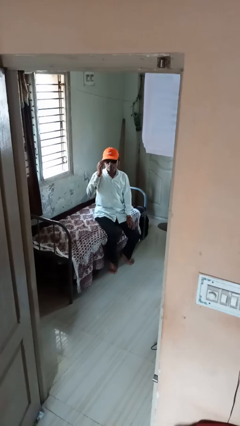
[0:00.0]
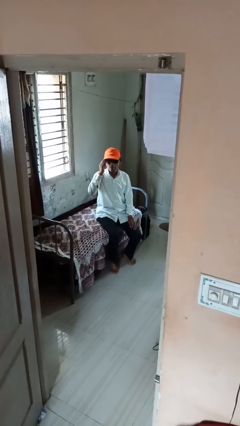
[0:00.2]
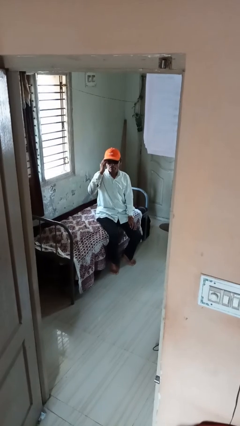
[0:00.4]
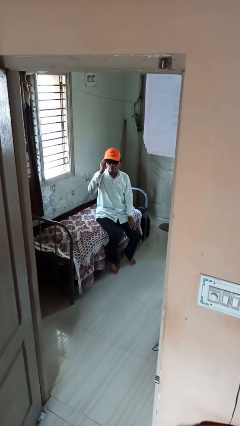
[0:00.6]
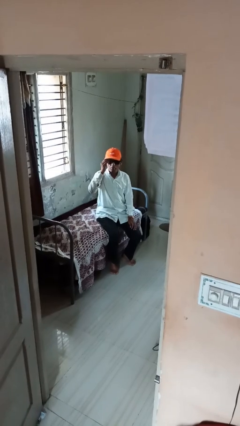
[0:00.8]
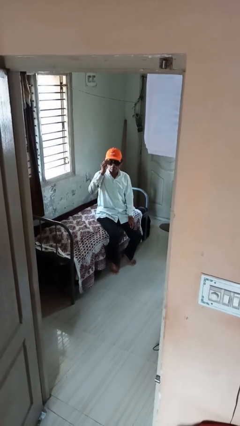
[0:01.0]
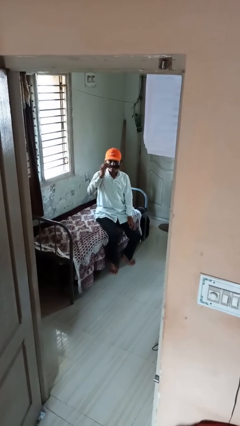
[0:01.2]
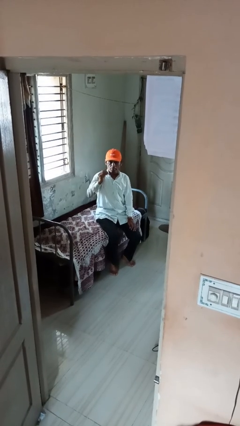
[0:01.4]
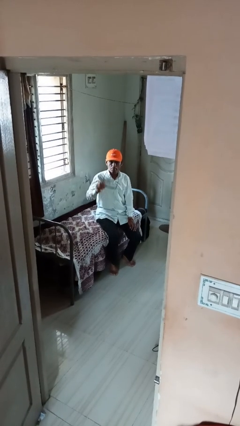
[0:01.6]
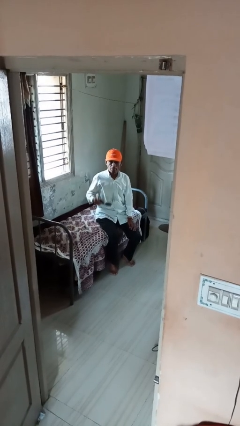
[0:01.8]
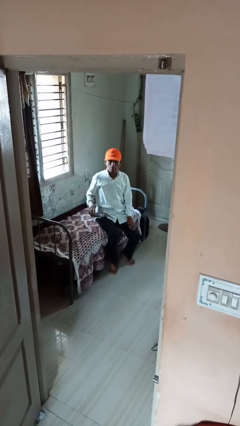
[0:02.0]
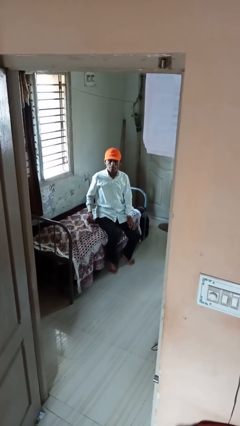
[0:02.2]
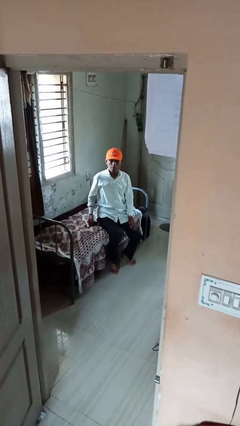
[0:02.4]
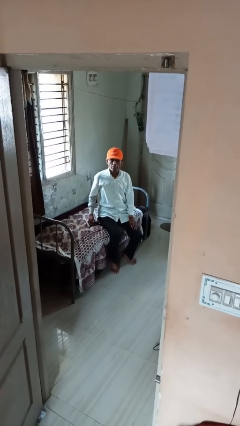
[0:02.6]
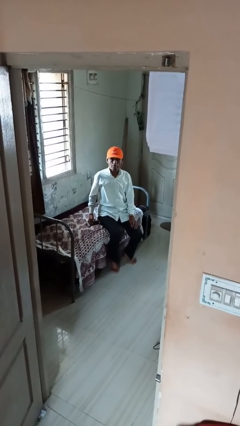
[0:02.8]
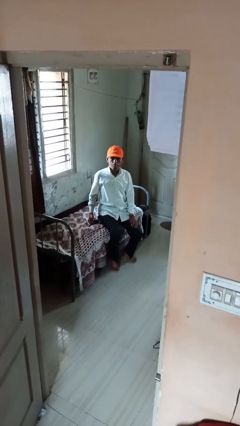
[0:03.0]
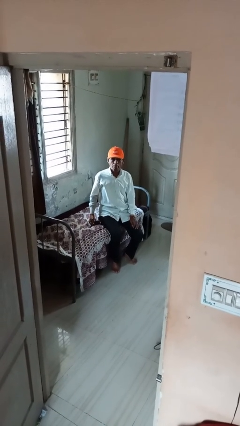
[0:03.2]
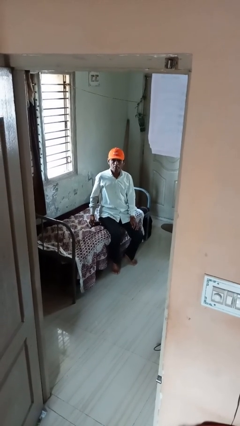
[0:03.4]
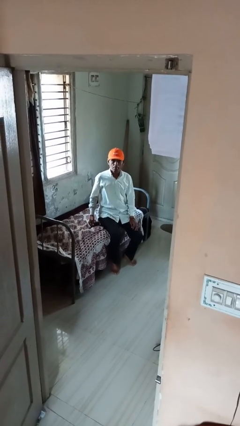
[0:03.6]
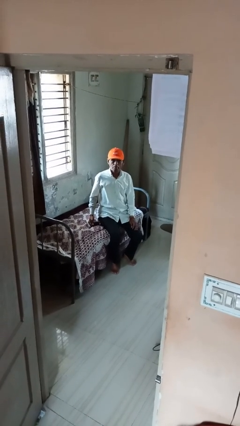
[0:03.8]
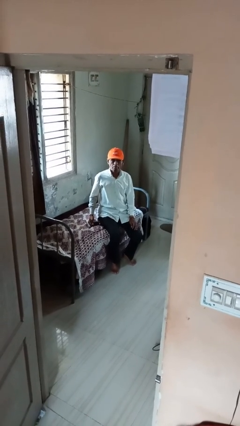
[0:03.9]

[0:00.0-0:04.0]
person takes off sunglasses

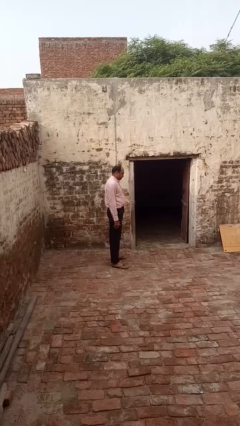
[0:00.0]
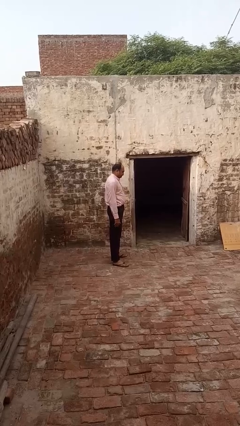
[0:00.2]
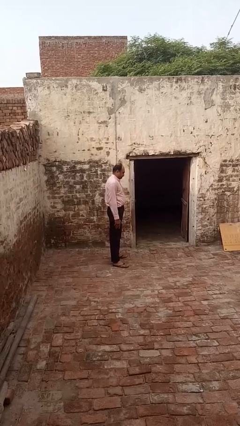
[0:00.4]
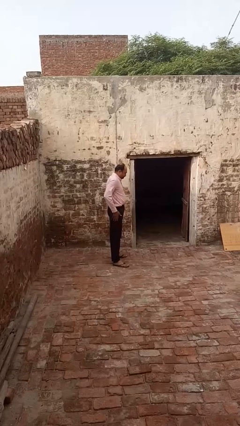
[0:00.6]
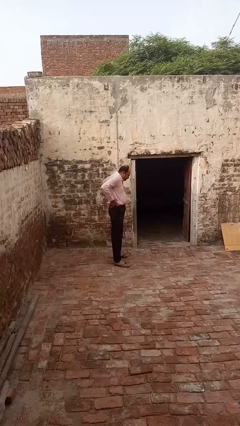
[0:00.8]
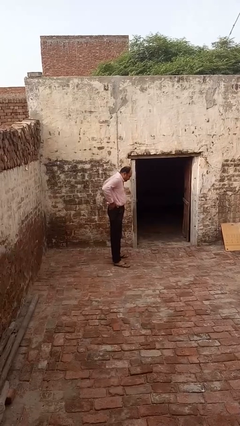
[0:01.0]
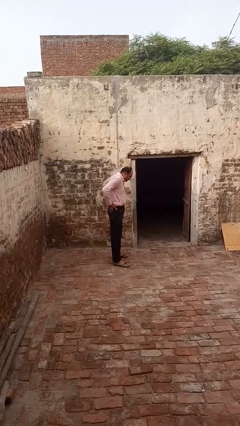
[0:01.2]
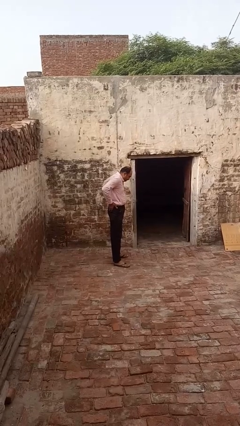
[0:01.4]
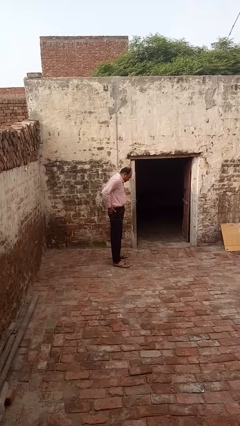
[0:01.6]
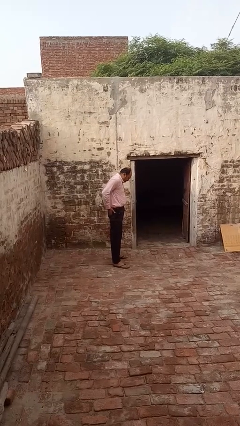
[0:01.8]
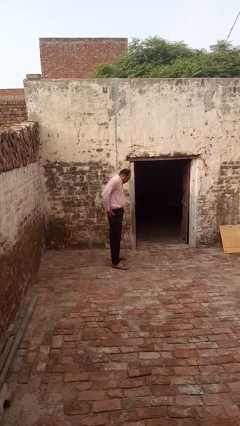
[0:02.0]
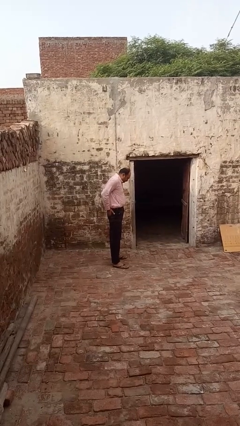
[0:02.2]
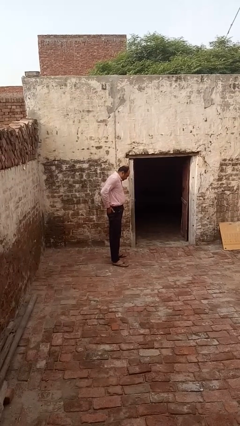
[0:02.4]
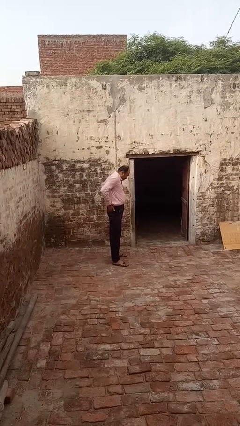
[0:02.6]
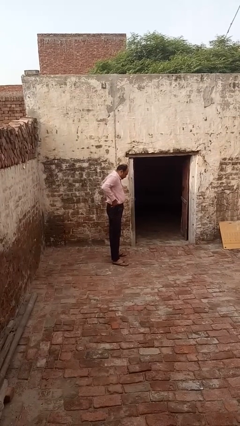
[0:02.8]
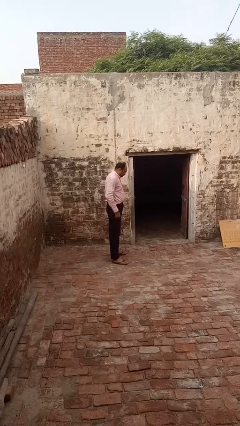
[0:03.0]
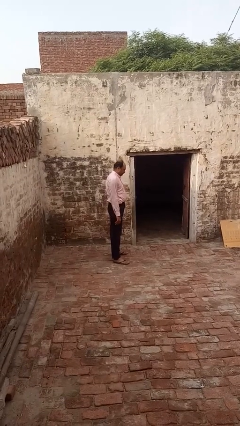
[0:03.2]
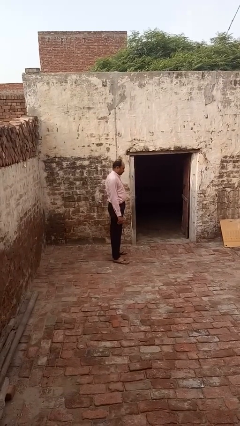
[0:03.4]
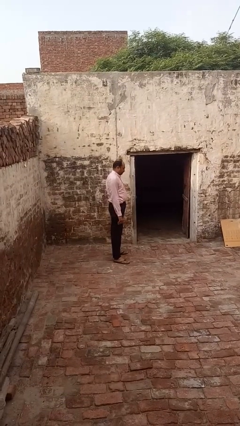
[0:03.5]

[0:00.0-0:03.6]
person puts hands in back pockets

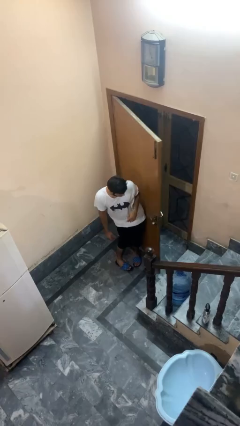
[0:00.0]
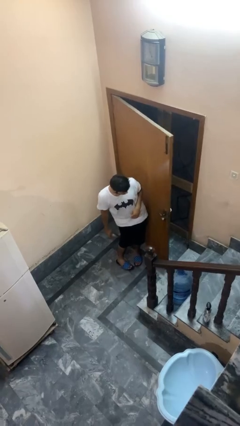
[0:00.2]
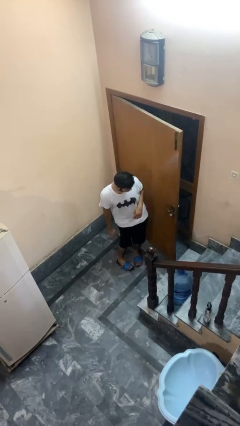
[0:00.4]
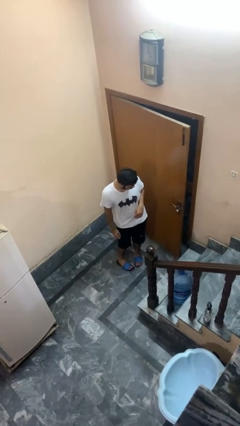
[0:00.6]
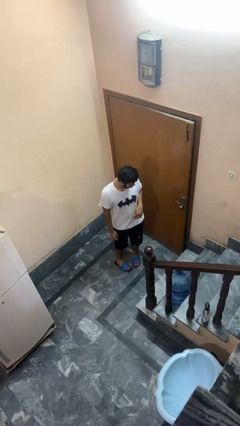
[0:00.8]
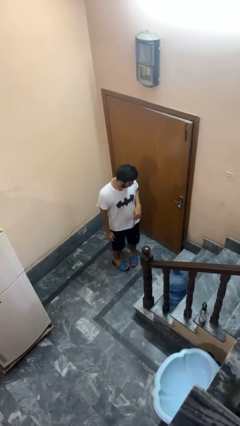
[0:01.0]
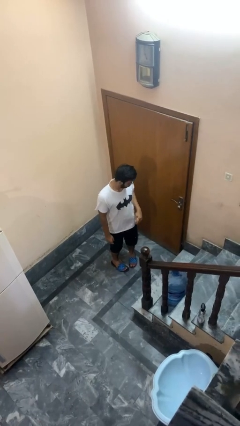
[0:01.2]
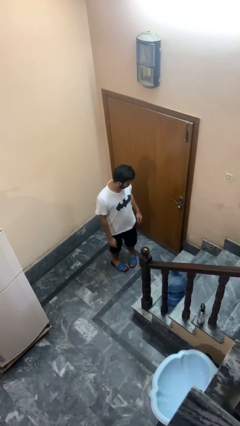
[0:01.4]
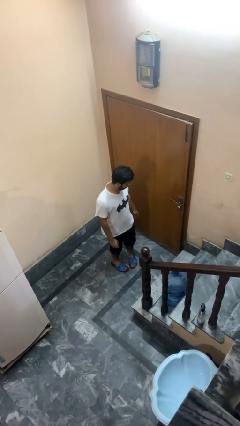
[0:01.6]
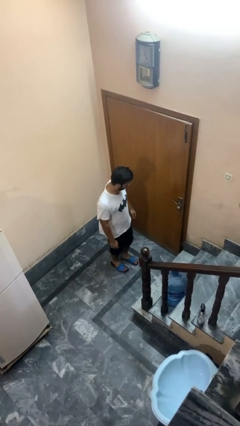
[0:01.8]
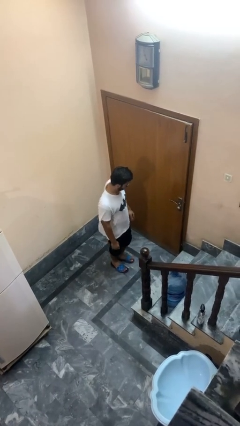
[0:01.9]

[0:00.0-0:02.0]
person closes door with hip

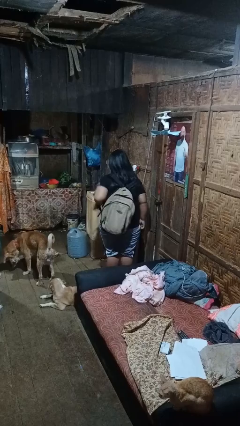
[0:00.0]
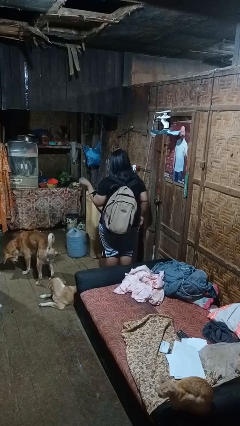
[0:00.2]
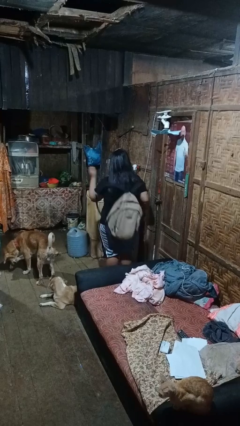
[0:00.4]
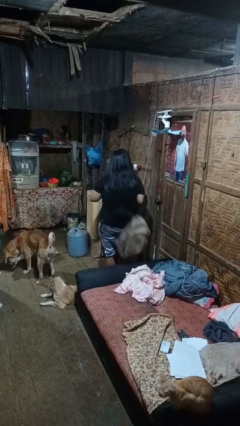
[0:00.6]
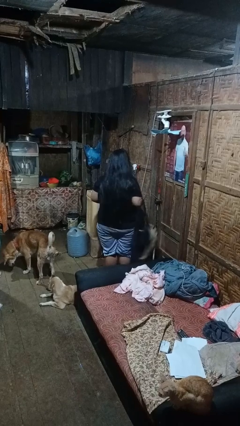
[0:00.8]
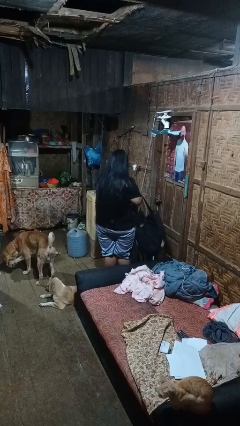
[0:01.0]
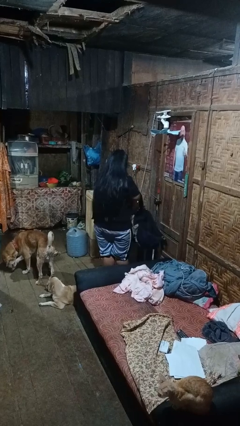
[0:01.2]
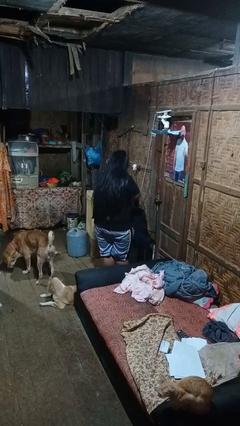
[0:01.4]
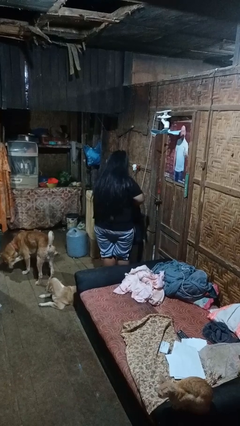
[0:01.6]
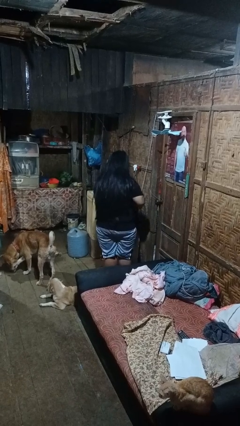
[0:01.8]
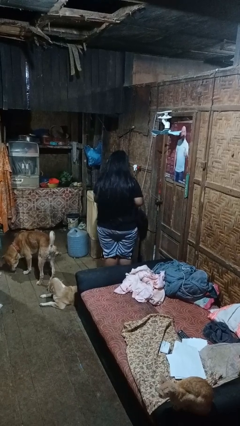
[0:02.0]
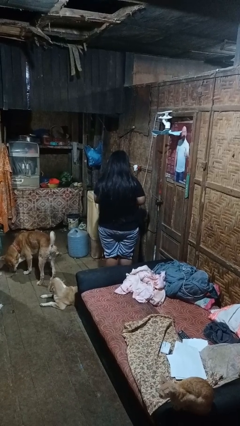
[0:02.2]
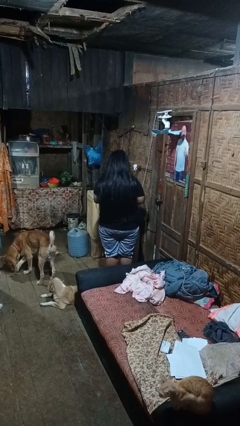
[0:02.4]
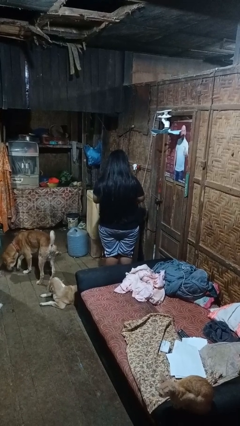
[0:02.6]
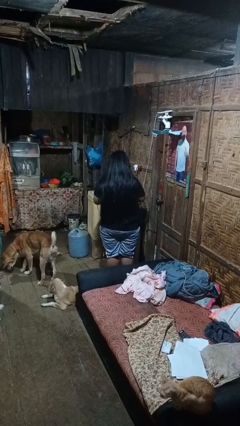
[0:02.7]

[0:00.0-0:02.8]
person takes off backpack

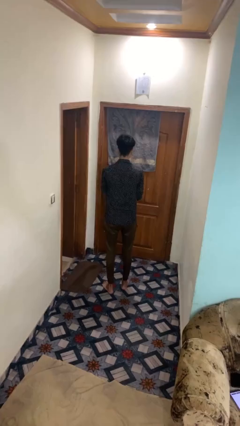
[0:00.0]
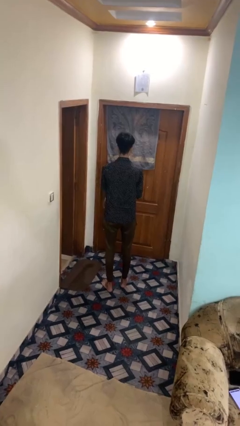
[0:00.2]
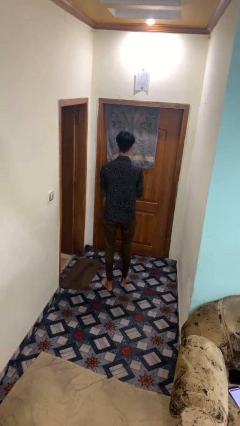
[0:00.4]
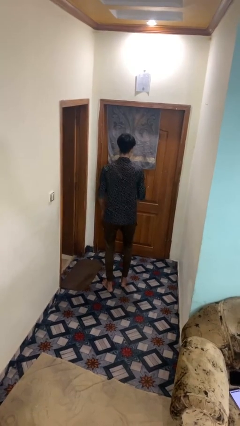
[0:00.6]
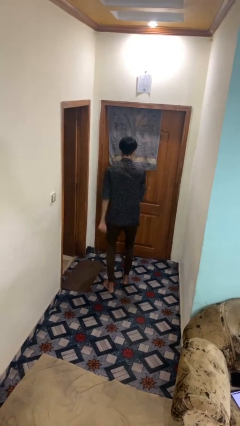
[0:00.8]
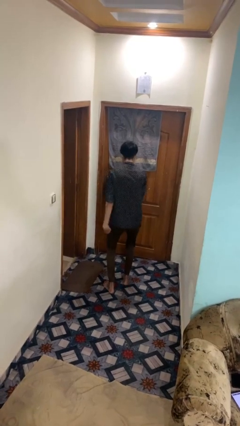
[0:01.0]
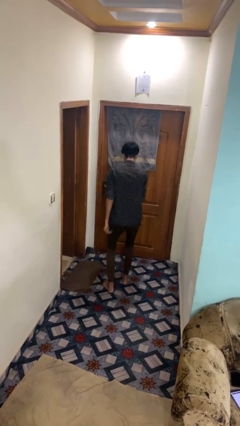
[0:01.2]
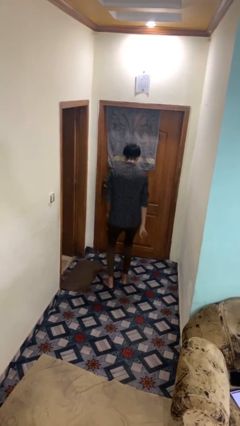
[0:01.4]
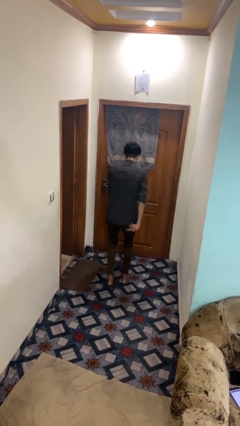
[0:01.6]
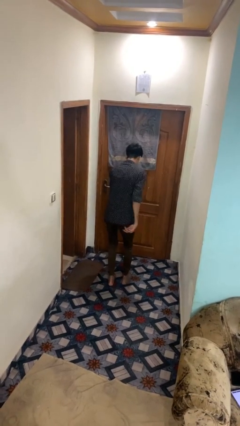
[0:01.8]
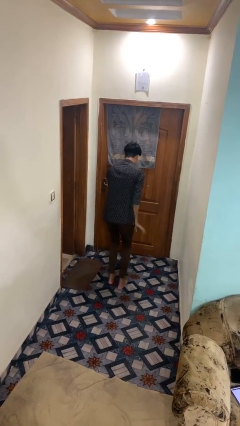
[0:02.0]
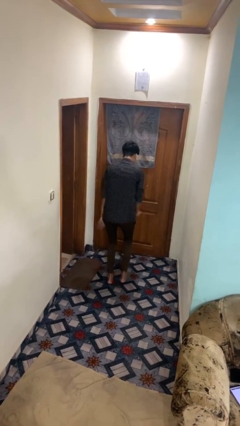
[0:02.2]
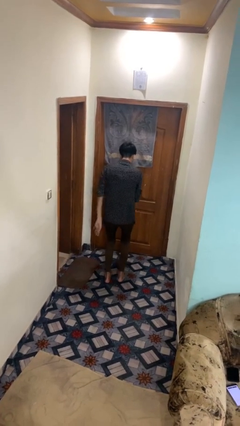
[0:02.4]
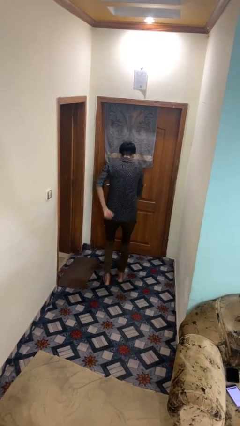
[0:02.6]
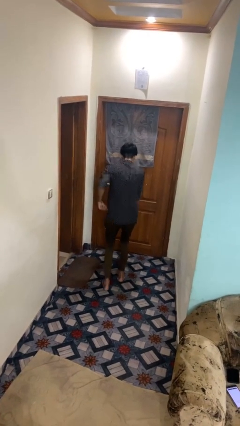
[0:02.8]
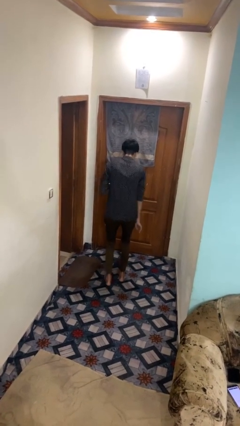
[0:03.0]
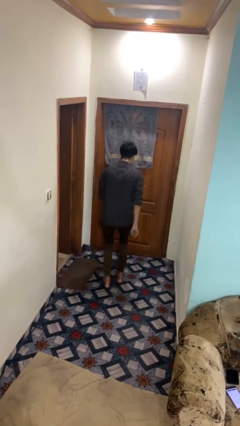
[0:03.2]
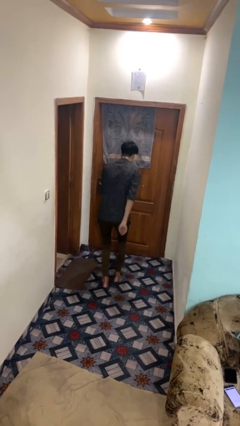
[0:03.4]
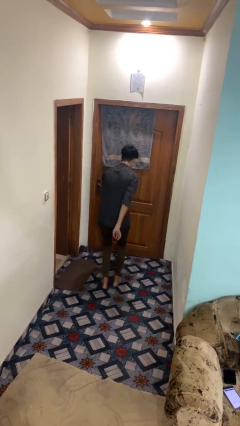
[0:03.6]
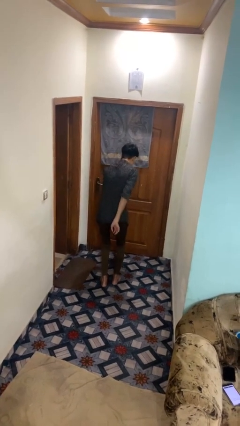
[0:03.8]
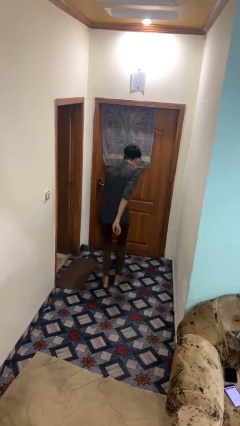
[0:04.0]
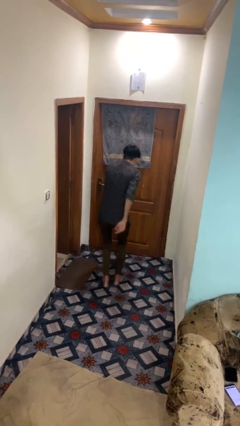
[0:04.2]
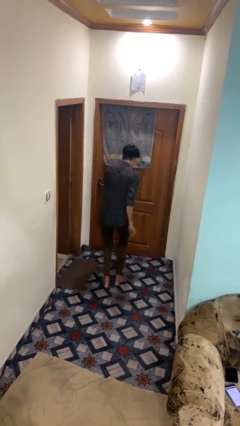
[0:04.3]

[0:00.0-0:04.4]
person dances in place

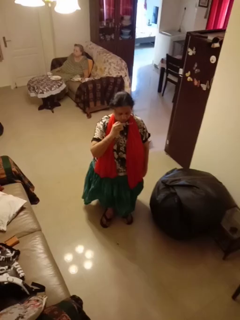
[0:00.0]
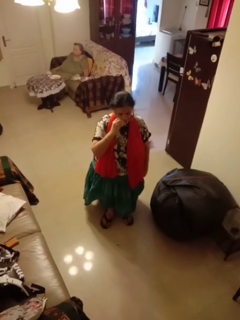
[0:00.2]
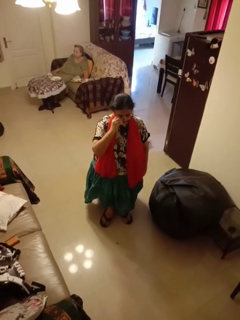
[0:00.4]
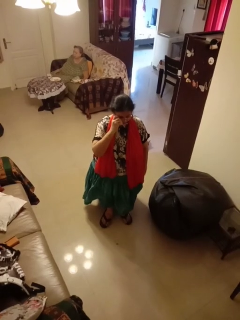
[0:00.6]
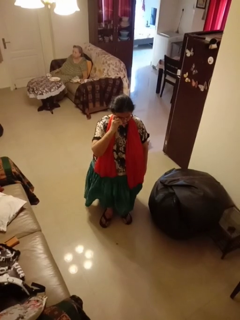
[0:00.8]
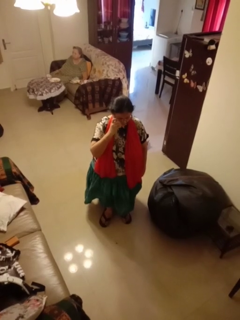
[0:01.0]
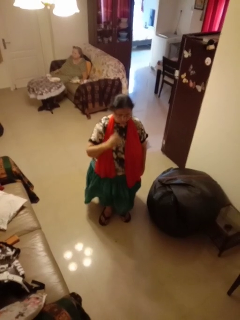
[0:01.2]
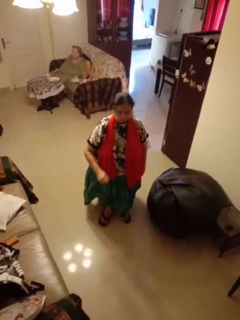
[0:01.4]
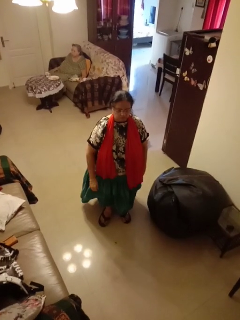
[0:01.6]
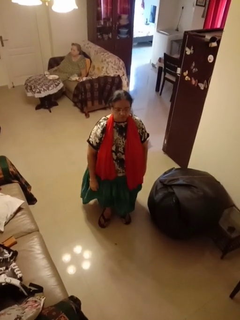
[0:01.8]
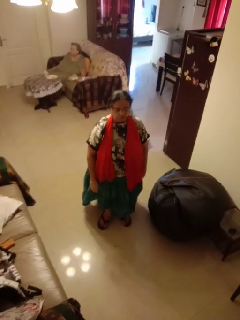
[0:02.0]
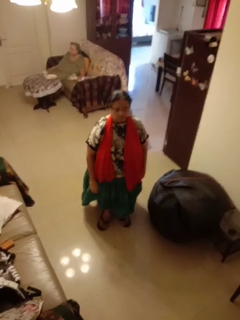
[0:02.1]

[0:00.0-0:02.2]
person puts on glasses
